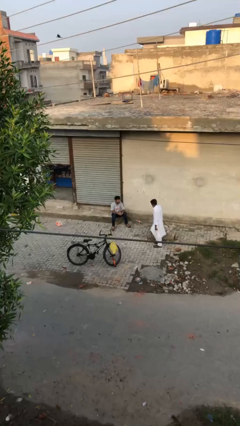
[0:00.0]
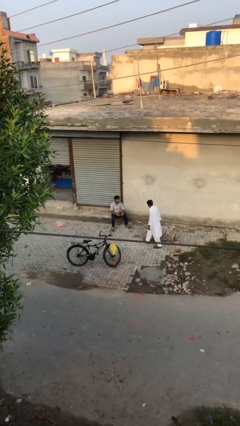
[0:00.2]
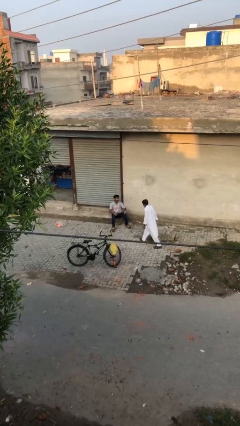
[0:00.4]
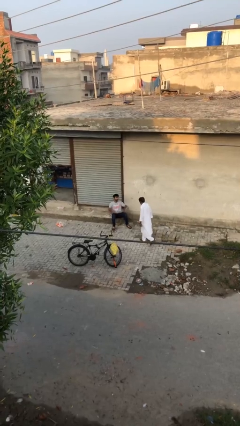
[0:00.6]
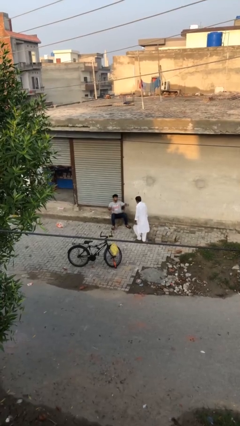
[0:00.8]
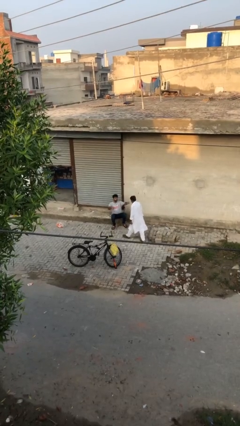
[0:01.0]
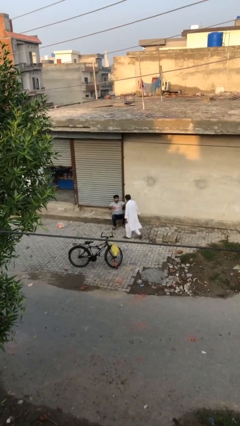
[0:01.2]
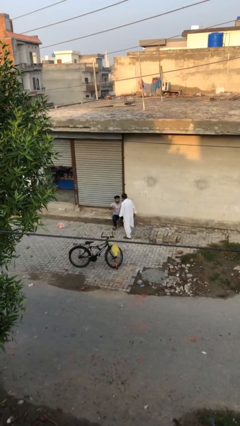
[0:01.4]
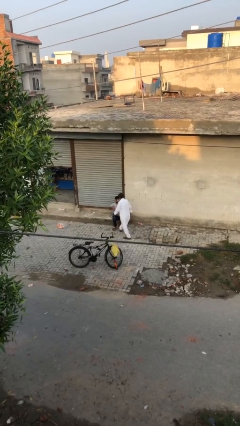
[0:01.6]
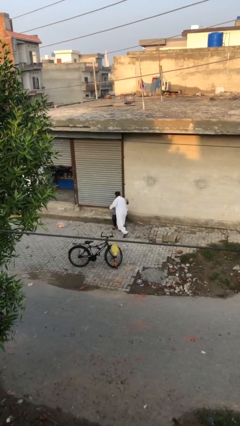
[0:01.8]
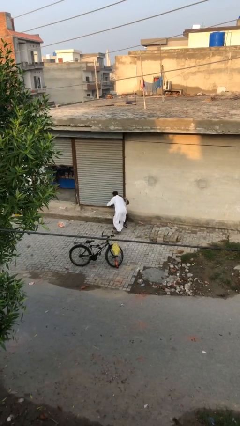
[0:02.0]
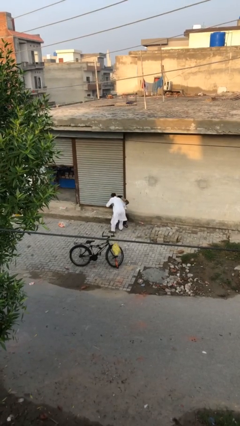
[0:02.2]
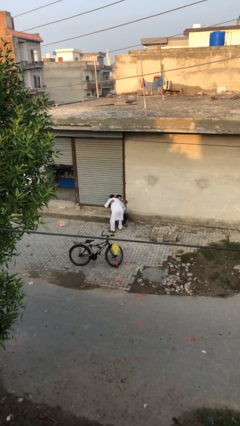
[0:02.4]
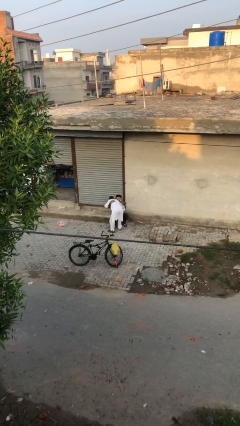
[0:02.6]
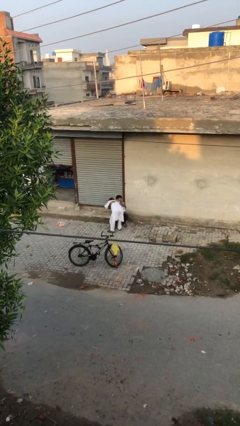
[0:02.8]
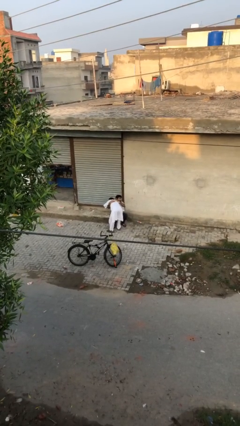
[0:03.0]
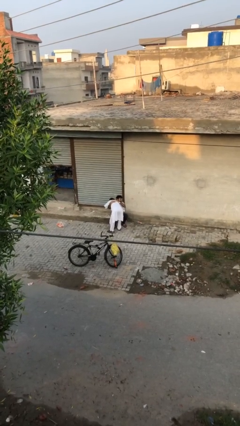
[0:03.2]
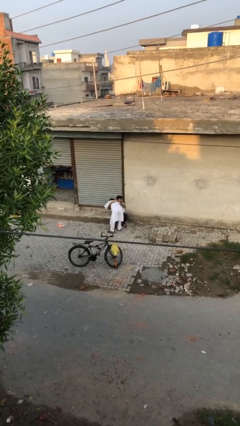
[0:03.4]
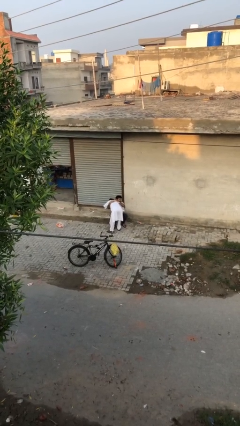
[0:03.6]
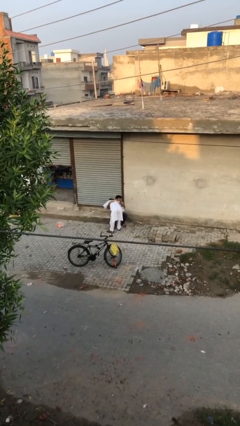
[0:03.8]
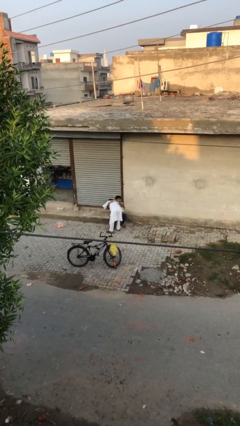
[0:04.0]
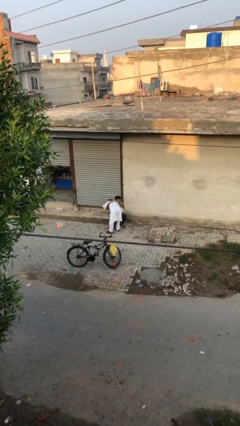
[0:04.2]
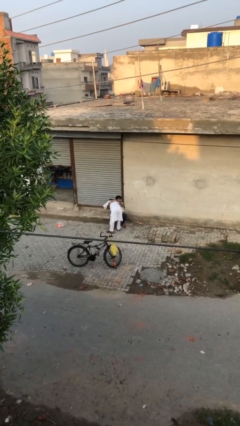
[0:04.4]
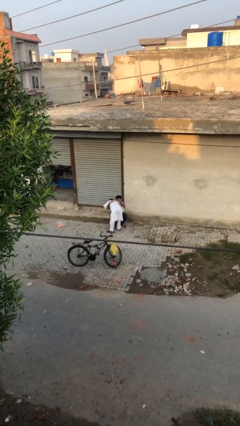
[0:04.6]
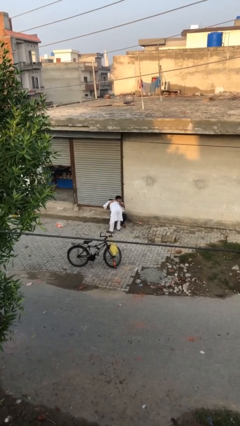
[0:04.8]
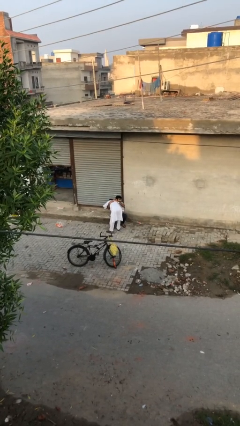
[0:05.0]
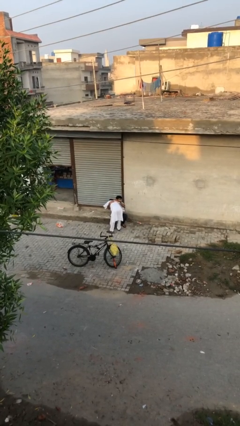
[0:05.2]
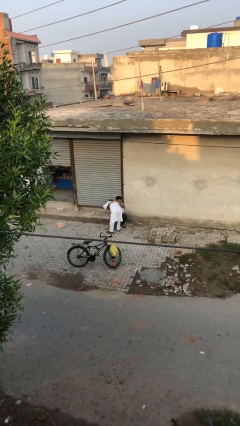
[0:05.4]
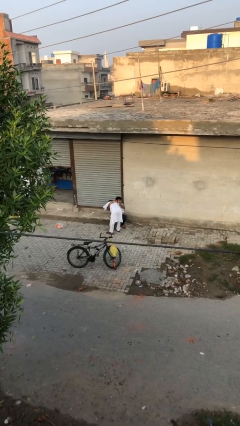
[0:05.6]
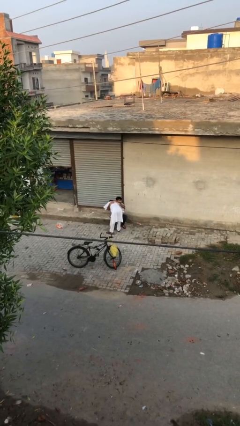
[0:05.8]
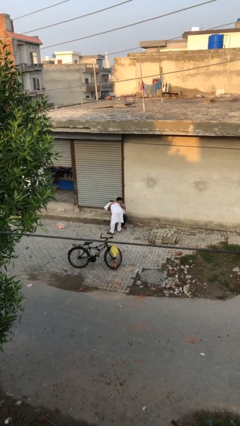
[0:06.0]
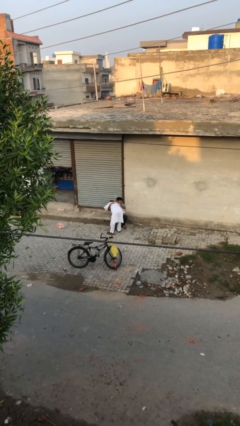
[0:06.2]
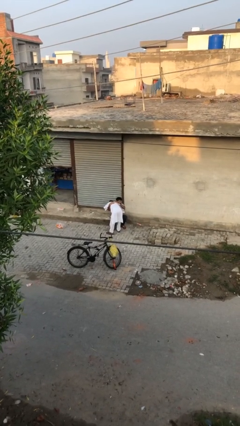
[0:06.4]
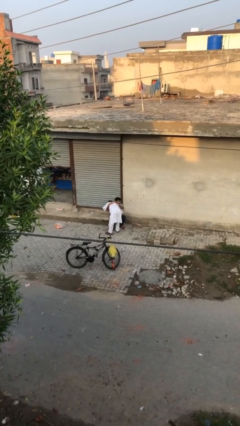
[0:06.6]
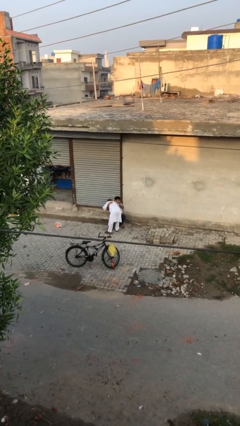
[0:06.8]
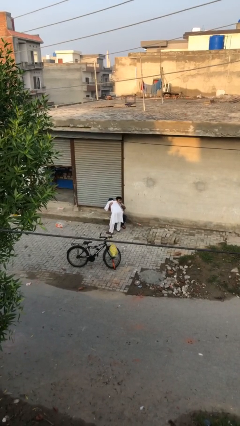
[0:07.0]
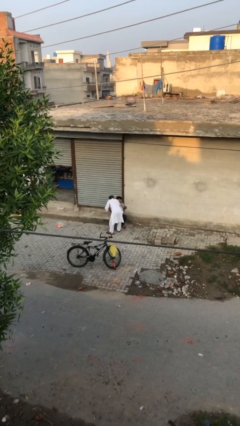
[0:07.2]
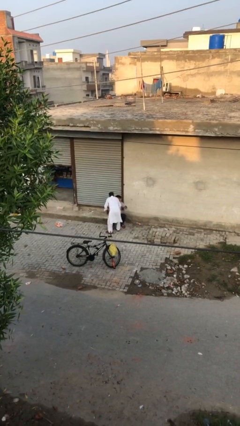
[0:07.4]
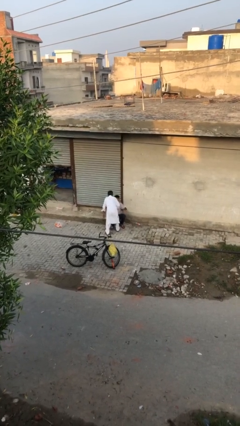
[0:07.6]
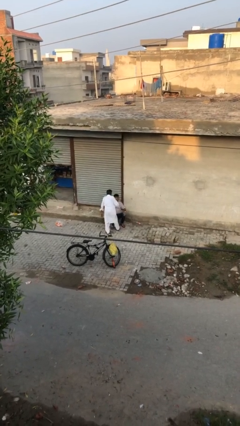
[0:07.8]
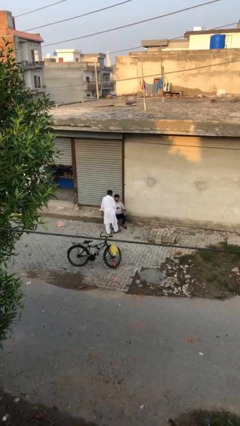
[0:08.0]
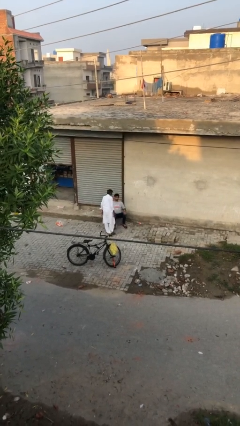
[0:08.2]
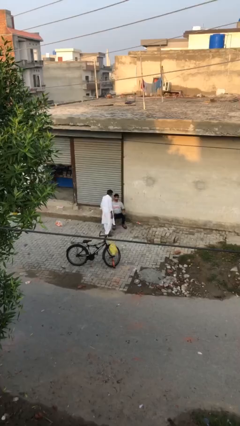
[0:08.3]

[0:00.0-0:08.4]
person embraces person

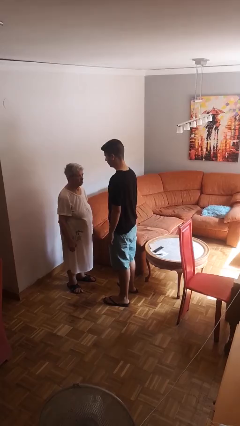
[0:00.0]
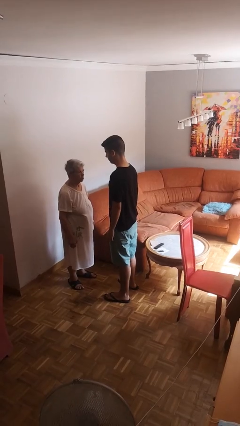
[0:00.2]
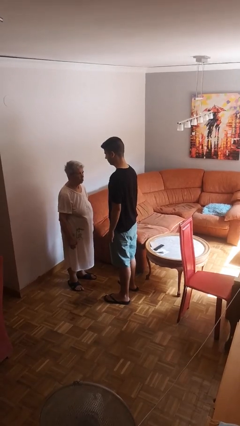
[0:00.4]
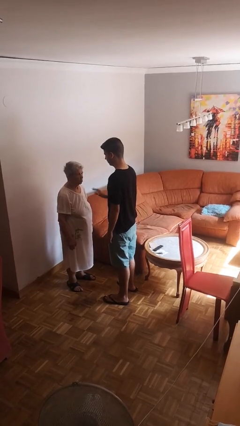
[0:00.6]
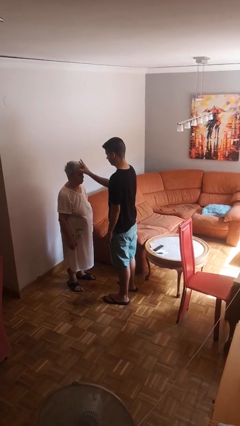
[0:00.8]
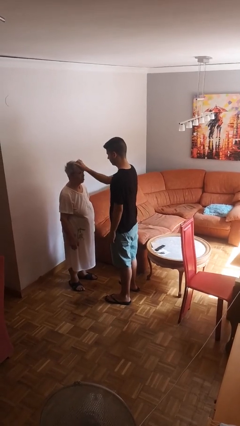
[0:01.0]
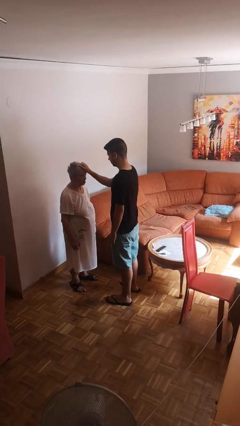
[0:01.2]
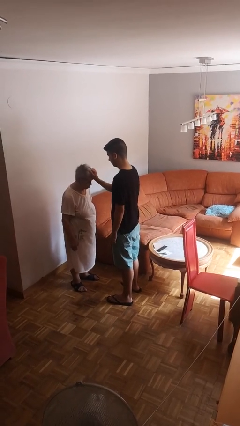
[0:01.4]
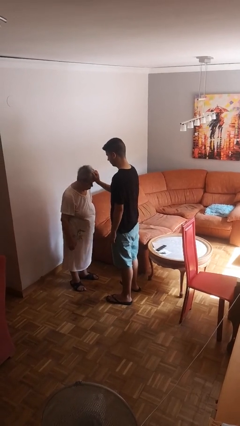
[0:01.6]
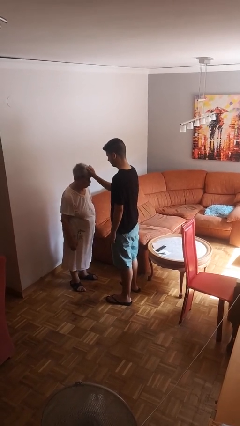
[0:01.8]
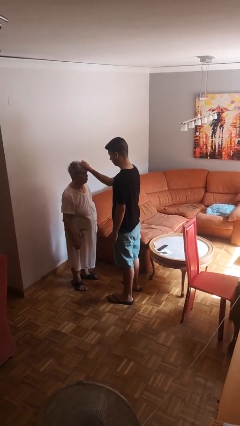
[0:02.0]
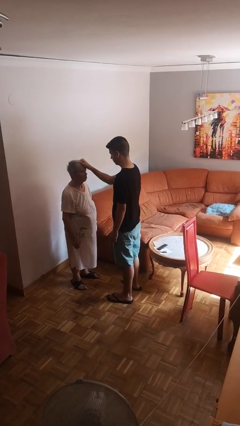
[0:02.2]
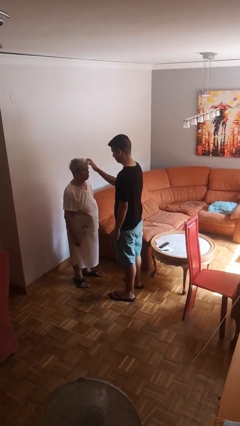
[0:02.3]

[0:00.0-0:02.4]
person grabs person by hair

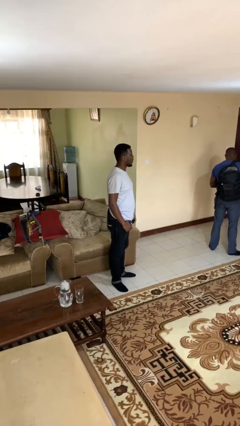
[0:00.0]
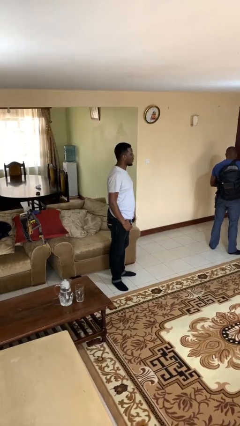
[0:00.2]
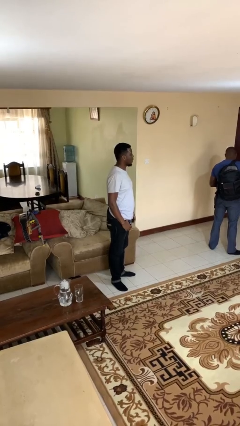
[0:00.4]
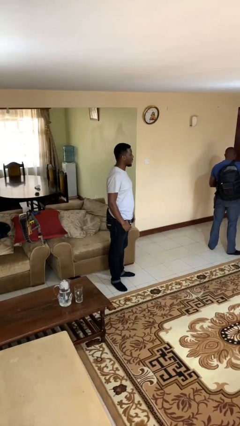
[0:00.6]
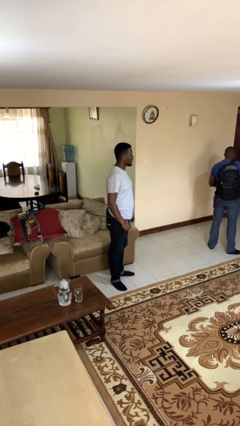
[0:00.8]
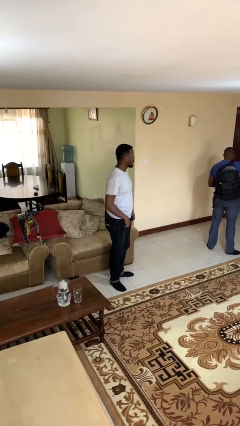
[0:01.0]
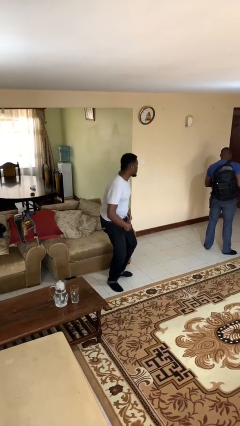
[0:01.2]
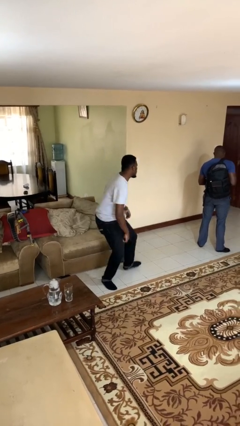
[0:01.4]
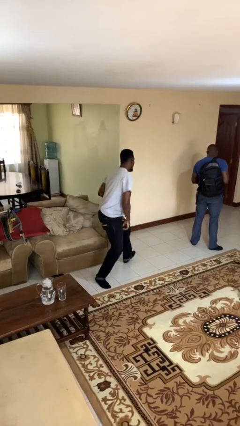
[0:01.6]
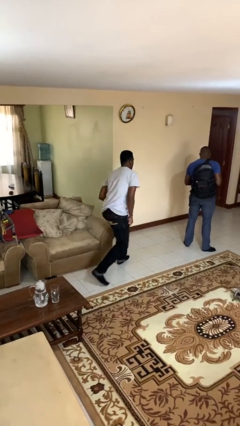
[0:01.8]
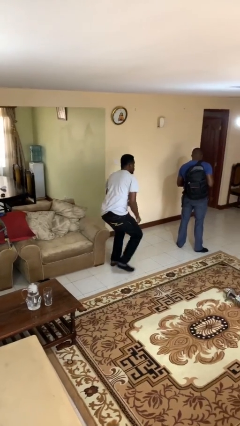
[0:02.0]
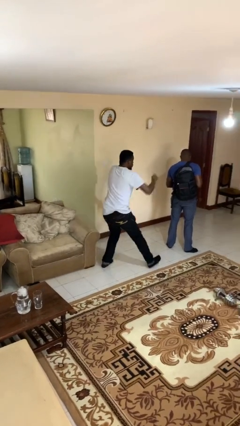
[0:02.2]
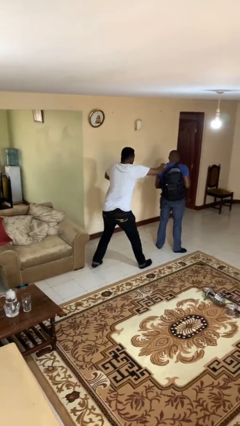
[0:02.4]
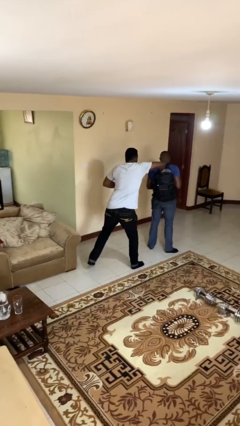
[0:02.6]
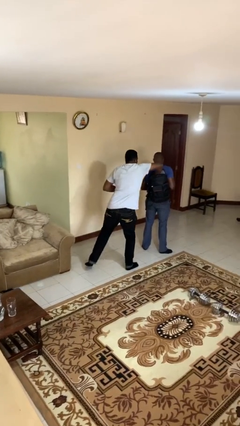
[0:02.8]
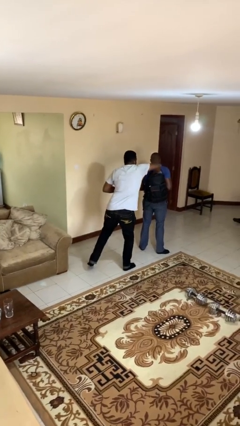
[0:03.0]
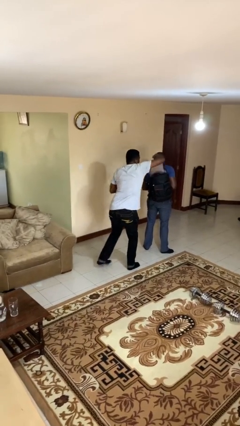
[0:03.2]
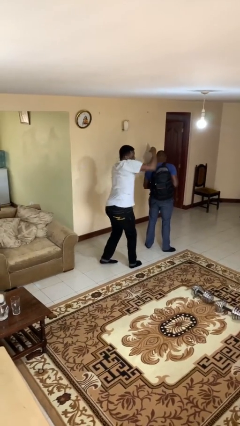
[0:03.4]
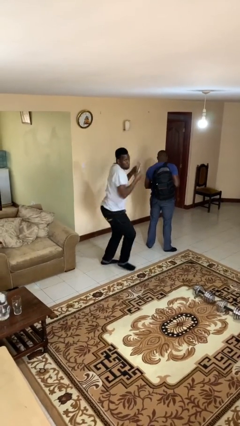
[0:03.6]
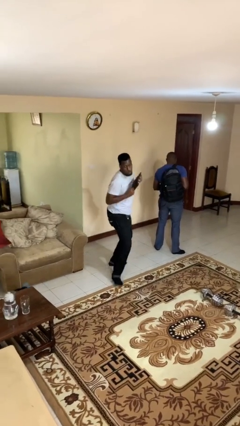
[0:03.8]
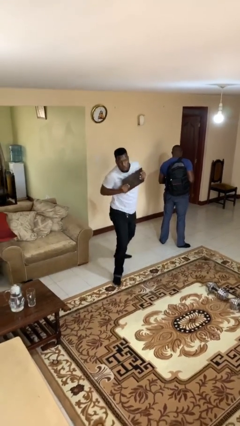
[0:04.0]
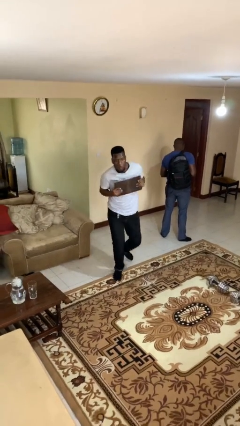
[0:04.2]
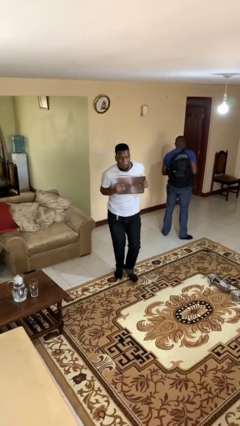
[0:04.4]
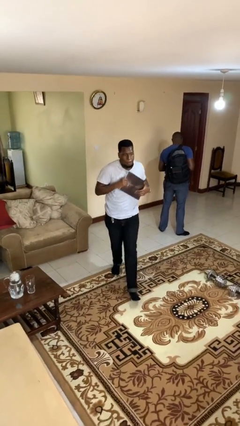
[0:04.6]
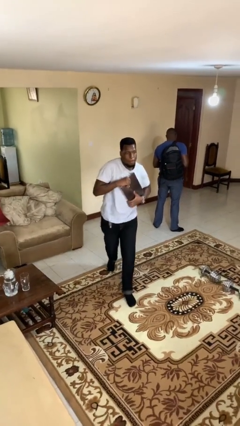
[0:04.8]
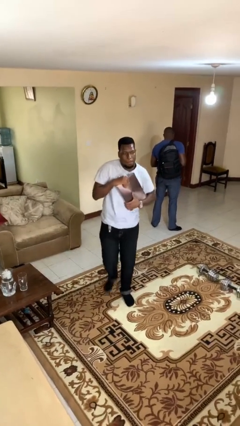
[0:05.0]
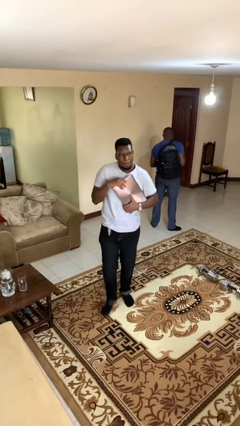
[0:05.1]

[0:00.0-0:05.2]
person steals object from person

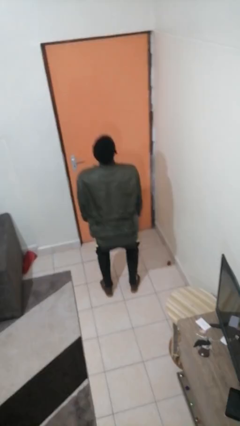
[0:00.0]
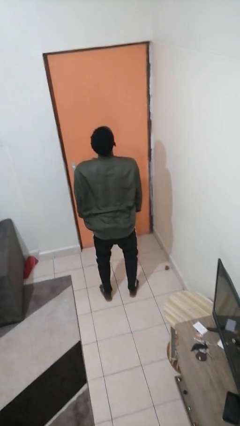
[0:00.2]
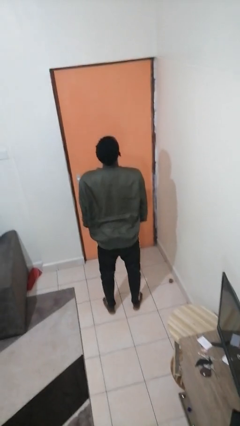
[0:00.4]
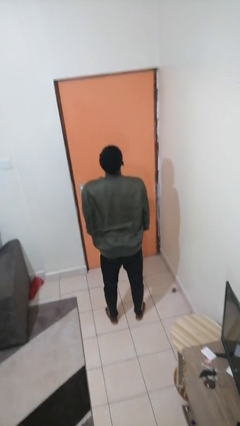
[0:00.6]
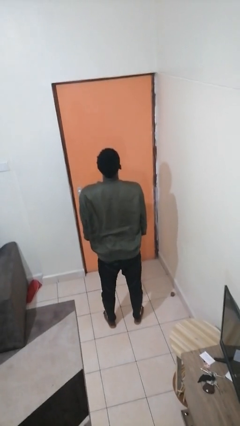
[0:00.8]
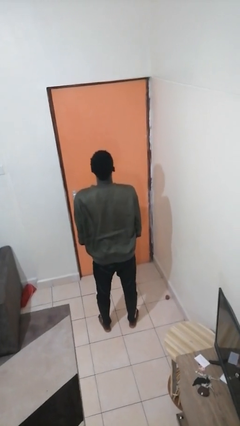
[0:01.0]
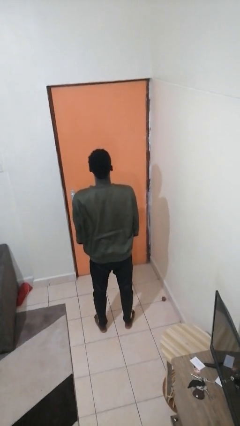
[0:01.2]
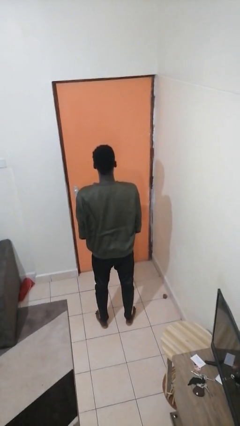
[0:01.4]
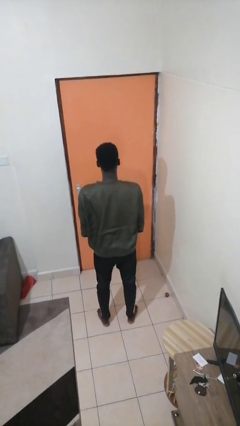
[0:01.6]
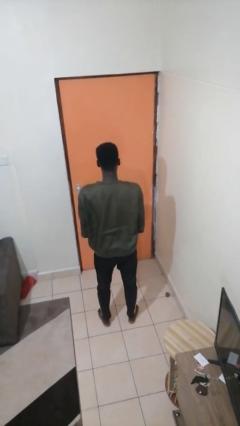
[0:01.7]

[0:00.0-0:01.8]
person stands up
